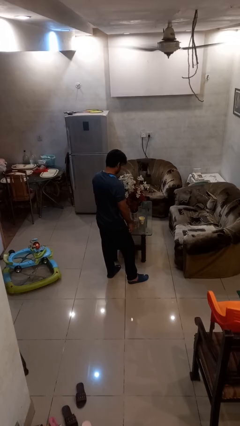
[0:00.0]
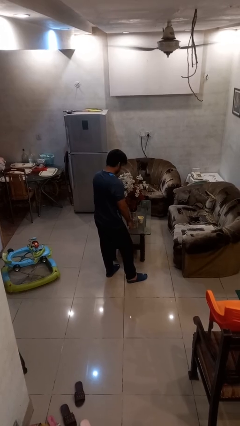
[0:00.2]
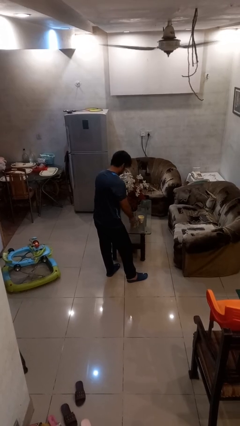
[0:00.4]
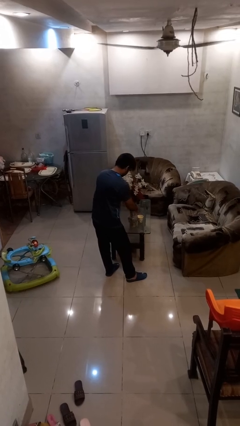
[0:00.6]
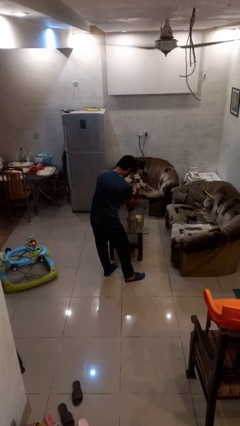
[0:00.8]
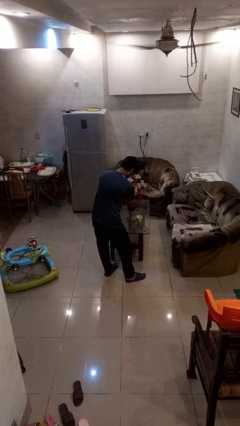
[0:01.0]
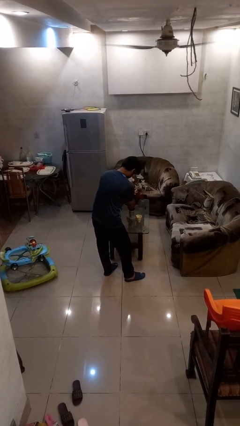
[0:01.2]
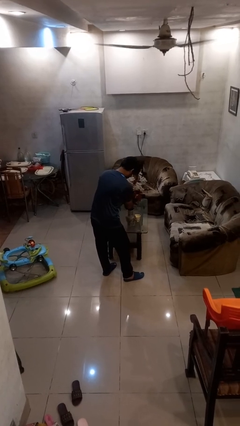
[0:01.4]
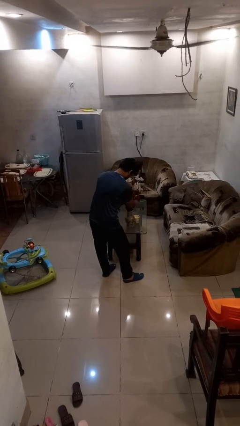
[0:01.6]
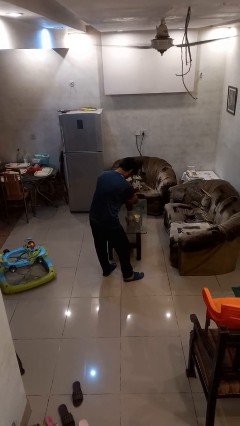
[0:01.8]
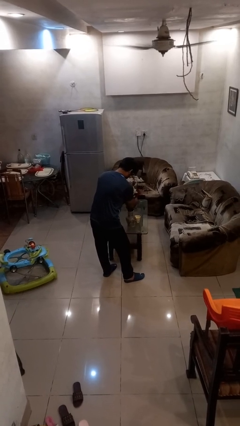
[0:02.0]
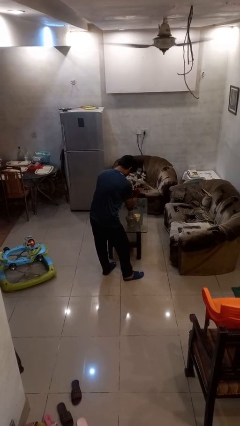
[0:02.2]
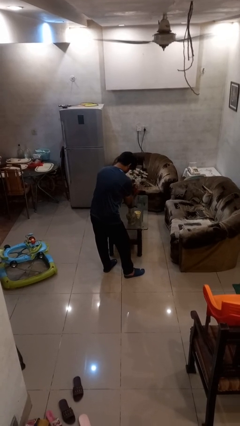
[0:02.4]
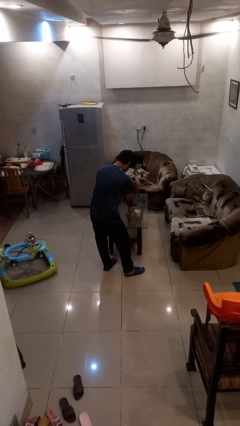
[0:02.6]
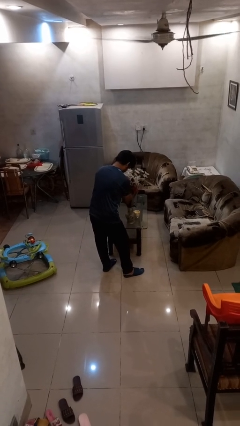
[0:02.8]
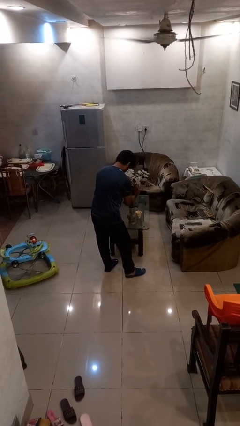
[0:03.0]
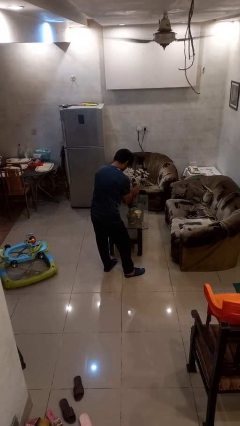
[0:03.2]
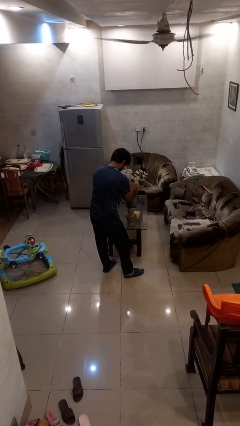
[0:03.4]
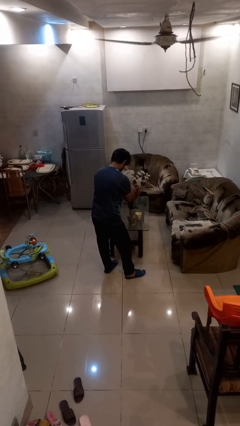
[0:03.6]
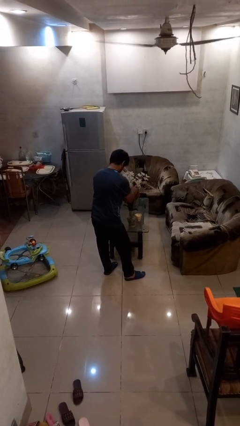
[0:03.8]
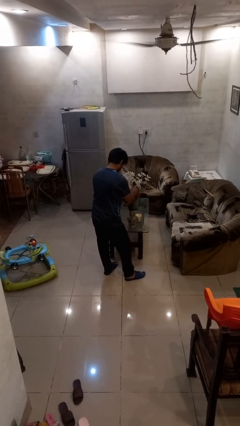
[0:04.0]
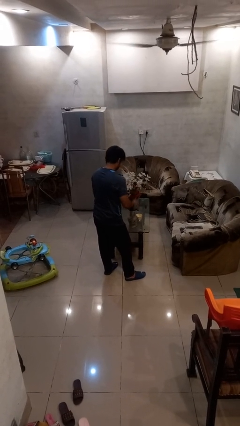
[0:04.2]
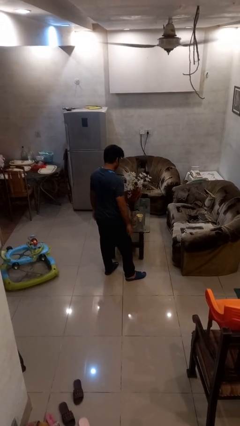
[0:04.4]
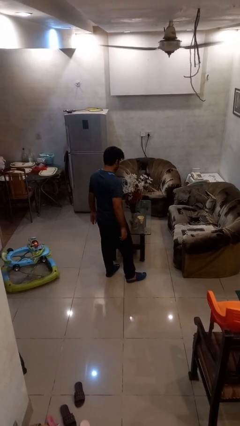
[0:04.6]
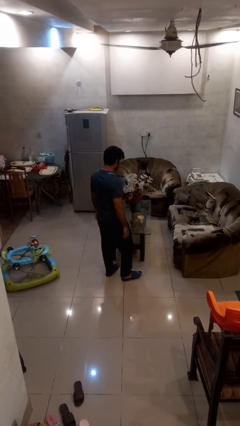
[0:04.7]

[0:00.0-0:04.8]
person arranges flowers in vase

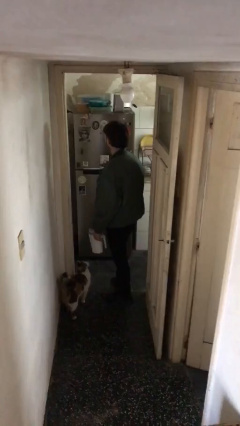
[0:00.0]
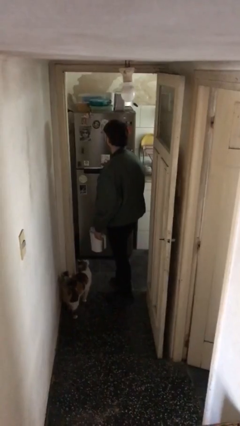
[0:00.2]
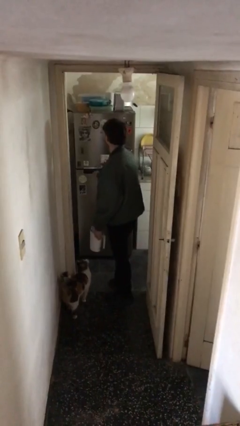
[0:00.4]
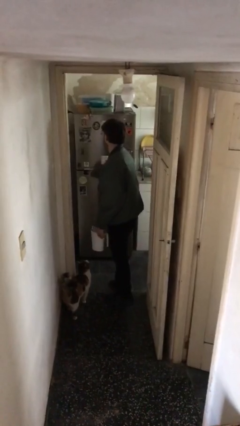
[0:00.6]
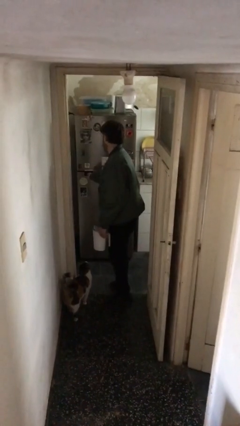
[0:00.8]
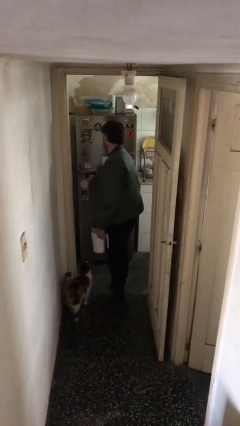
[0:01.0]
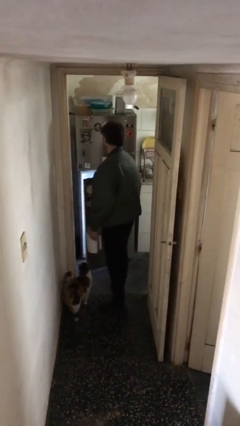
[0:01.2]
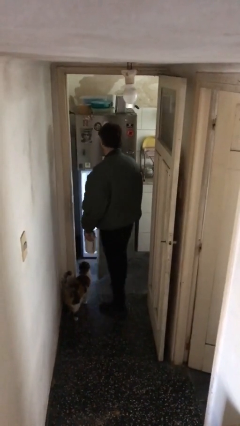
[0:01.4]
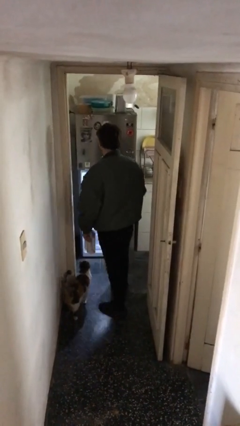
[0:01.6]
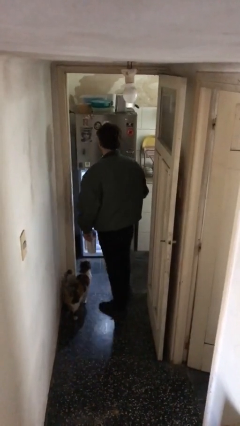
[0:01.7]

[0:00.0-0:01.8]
person opens refrigerator

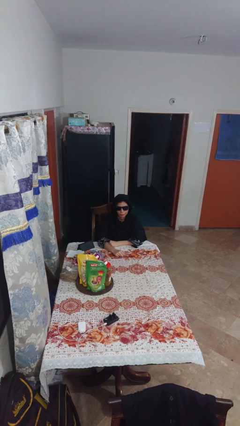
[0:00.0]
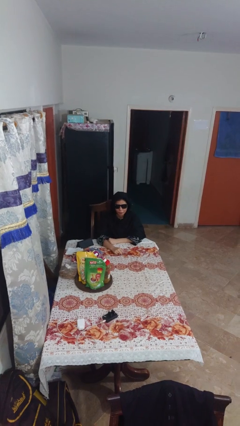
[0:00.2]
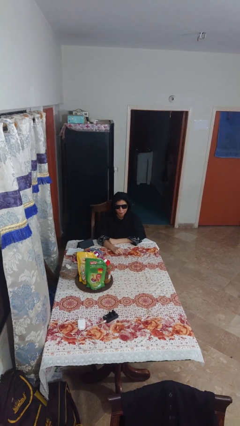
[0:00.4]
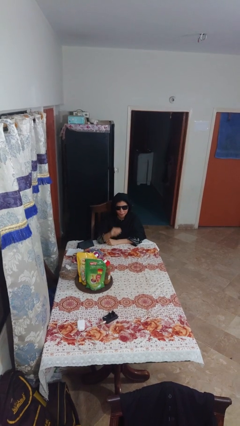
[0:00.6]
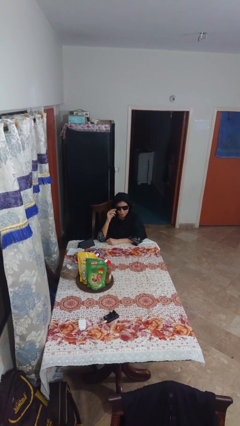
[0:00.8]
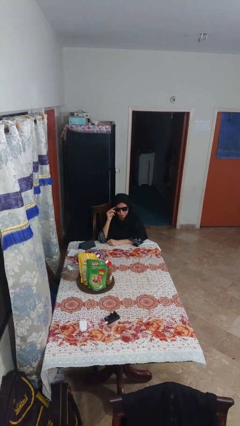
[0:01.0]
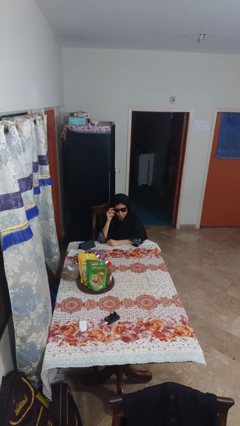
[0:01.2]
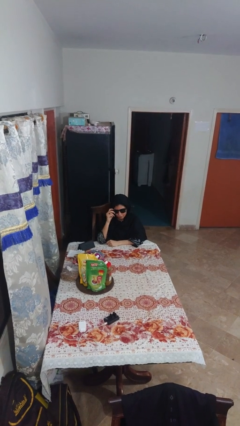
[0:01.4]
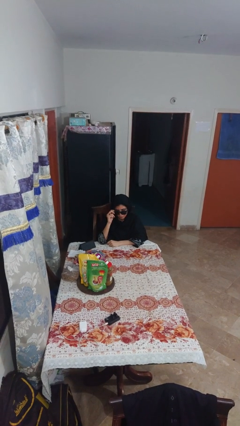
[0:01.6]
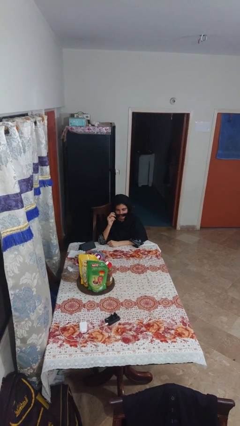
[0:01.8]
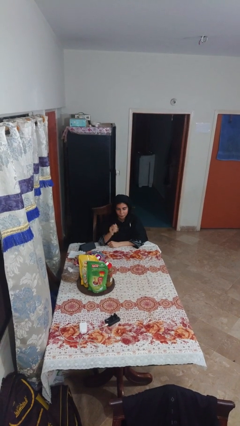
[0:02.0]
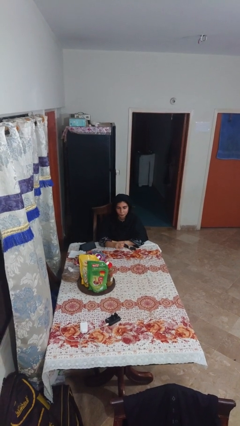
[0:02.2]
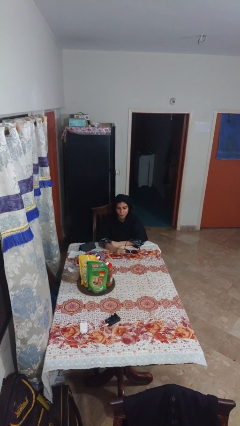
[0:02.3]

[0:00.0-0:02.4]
person takes off sunglasses

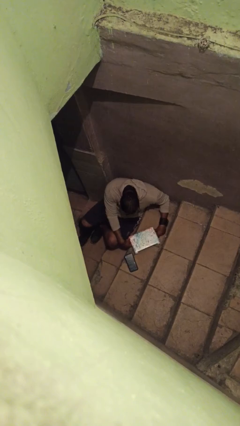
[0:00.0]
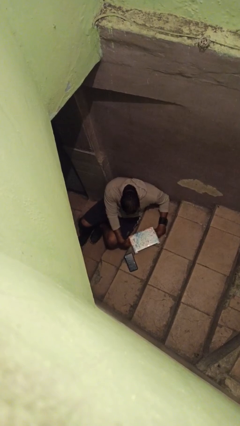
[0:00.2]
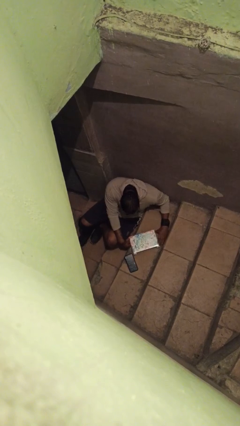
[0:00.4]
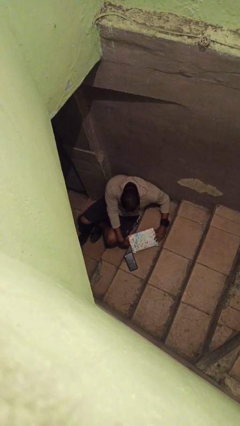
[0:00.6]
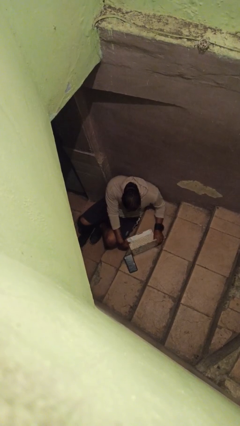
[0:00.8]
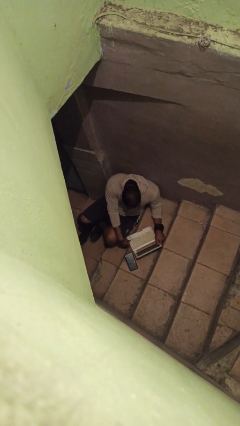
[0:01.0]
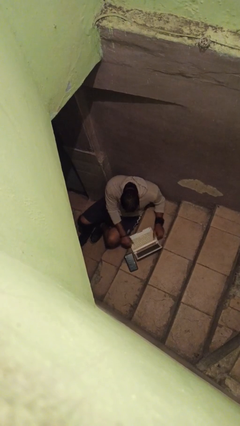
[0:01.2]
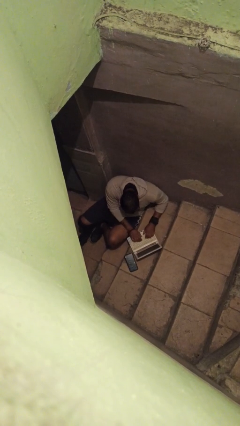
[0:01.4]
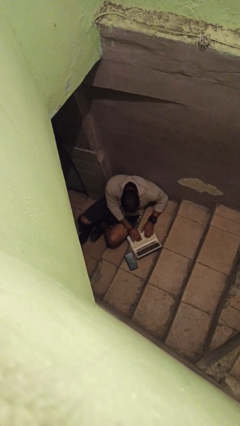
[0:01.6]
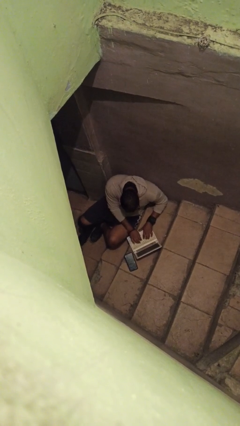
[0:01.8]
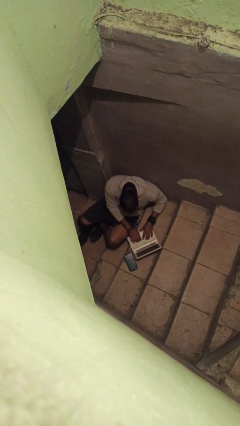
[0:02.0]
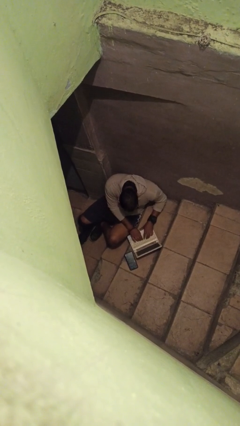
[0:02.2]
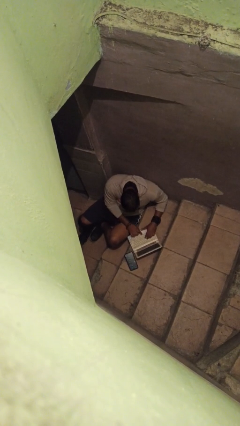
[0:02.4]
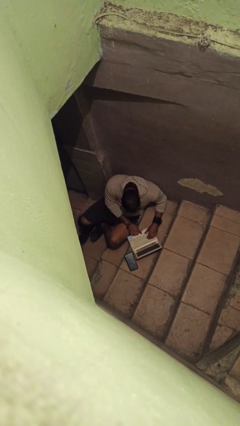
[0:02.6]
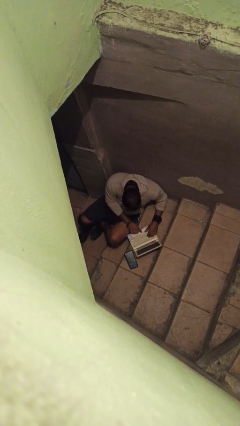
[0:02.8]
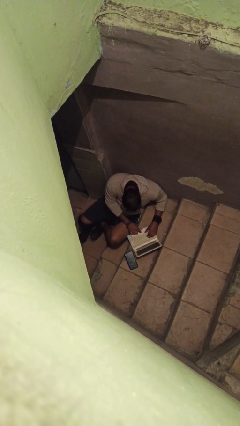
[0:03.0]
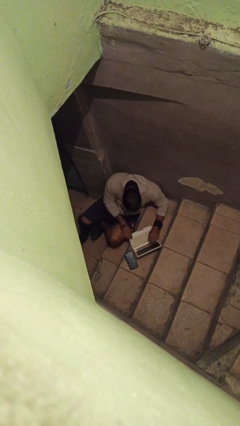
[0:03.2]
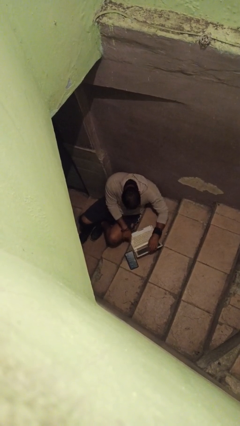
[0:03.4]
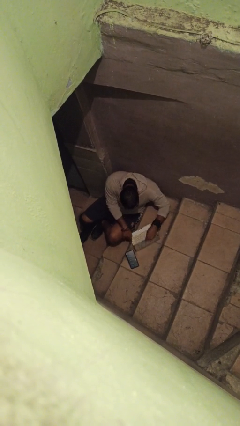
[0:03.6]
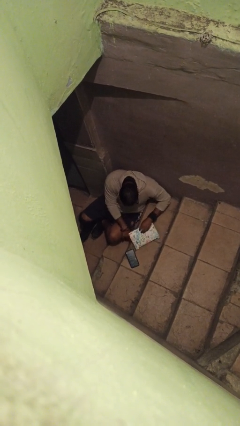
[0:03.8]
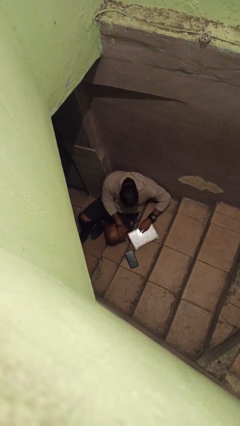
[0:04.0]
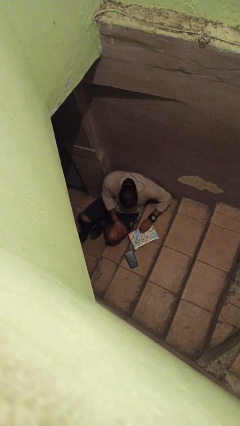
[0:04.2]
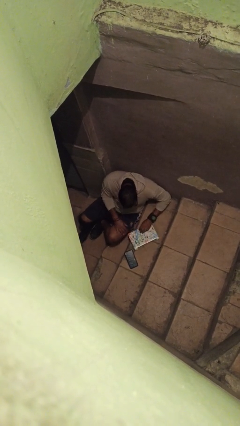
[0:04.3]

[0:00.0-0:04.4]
person interacts with laptop

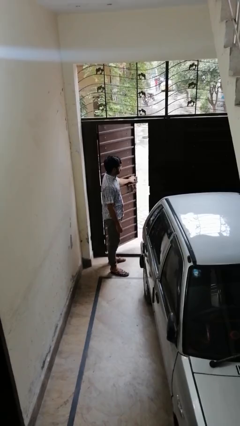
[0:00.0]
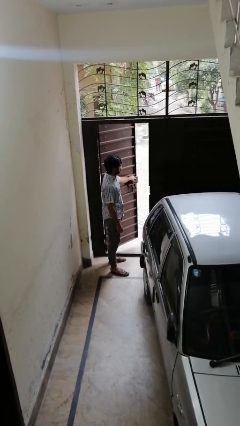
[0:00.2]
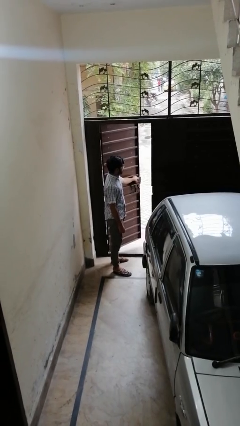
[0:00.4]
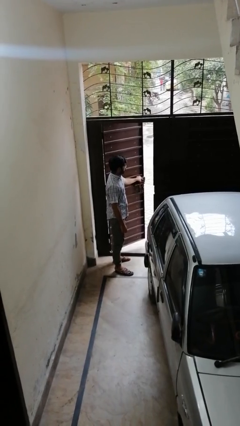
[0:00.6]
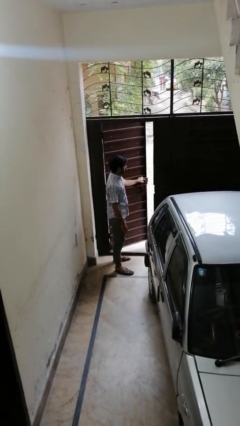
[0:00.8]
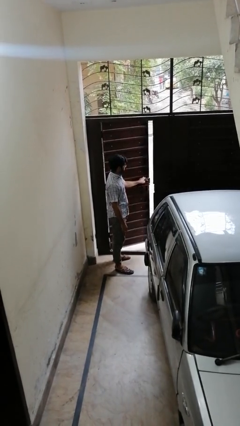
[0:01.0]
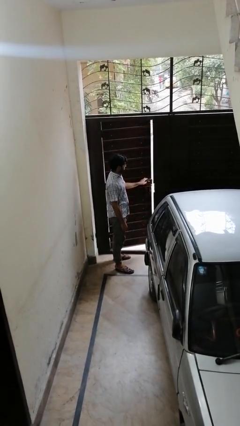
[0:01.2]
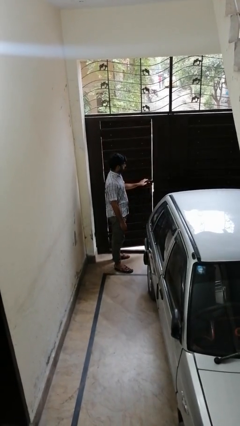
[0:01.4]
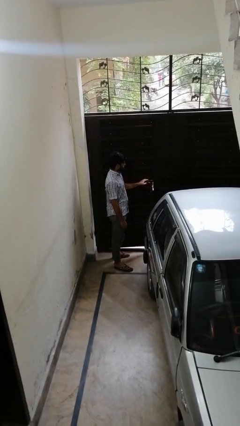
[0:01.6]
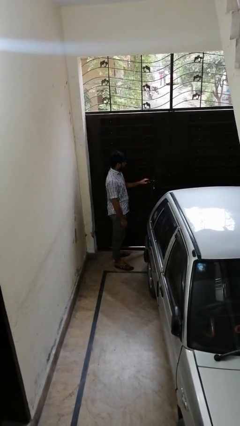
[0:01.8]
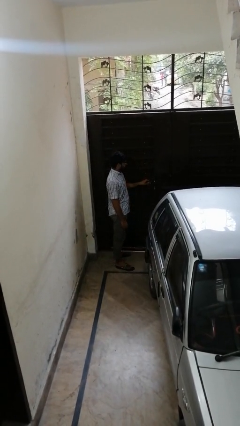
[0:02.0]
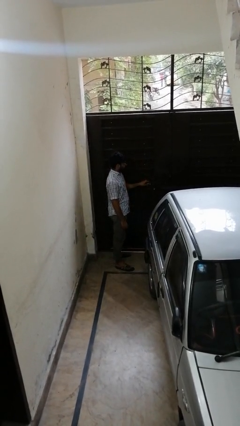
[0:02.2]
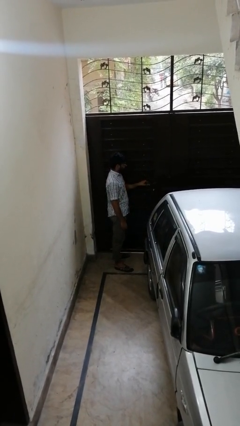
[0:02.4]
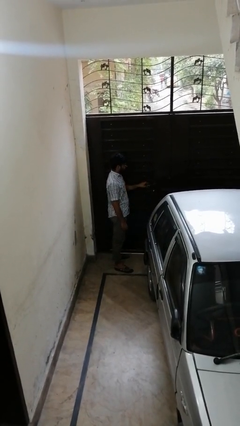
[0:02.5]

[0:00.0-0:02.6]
person closes gate

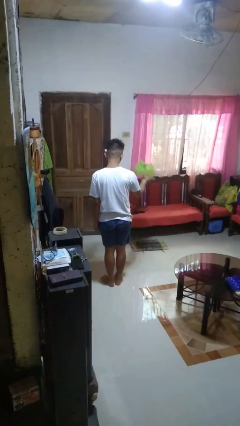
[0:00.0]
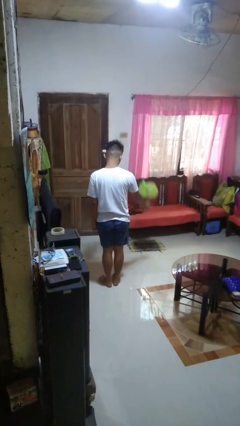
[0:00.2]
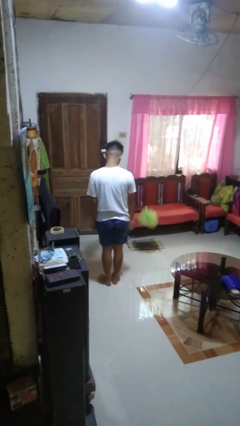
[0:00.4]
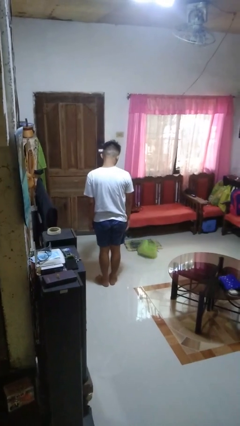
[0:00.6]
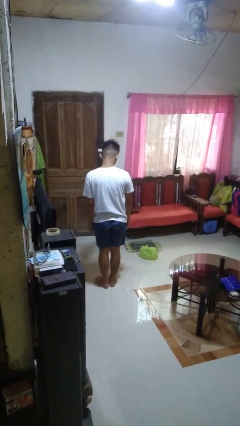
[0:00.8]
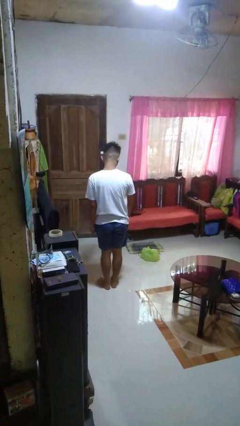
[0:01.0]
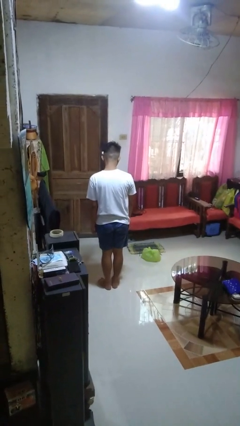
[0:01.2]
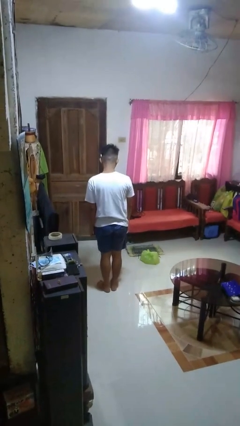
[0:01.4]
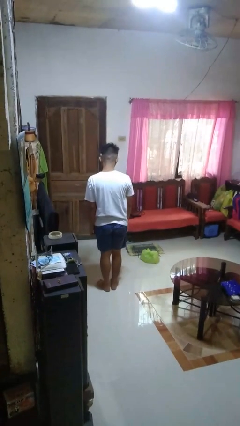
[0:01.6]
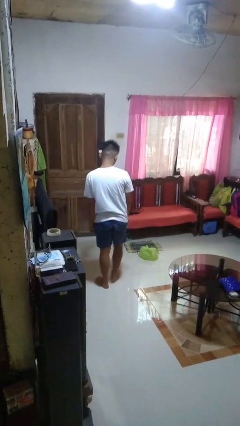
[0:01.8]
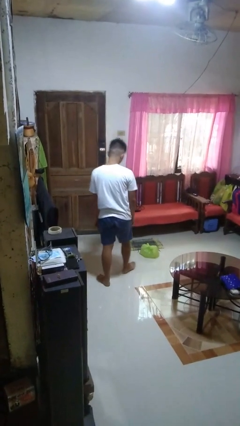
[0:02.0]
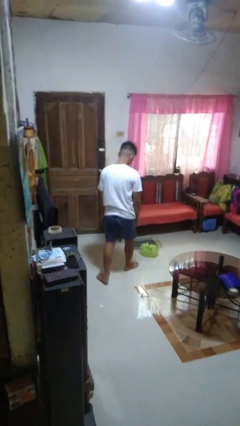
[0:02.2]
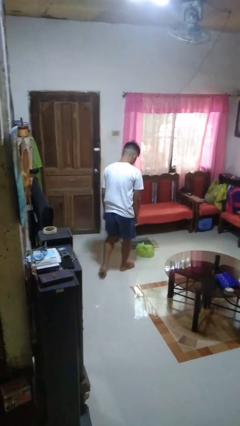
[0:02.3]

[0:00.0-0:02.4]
person throws object to ground
